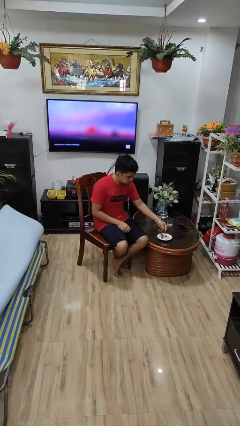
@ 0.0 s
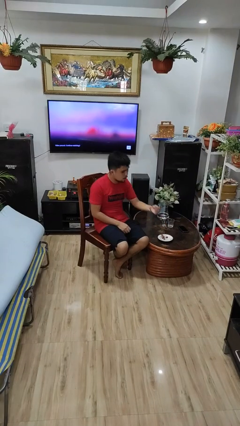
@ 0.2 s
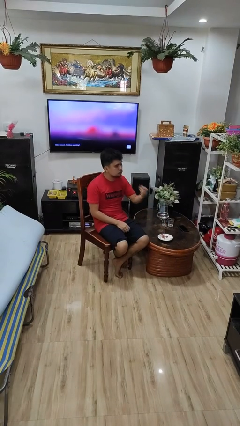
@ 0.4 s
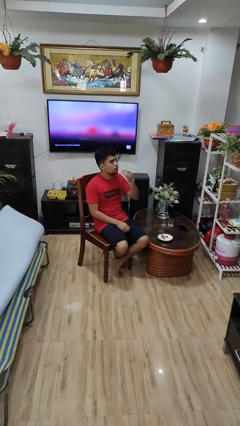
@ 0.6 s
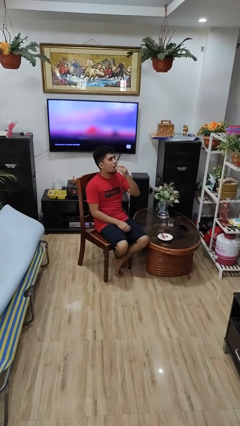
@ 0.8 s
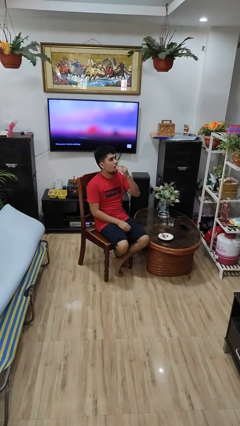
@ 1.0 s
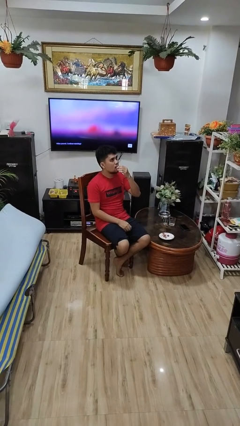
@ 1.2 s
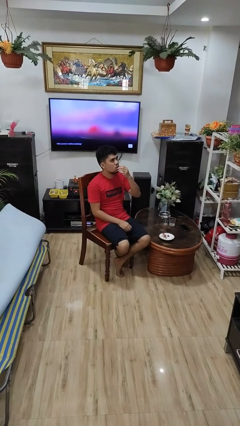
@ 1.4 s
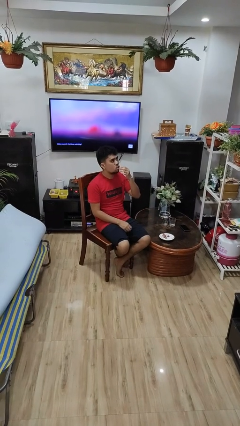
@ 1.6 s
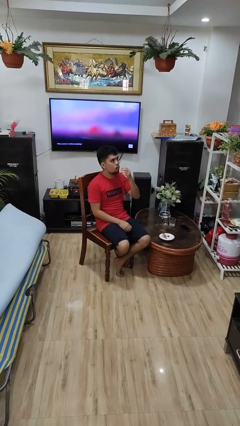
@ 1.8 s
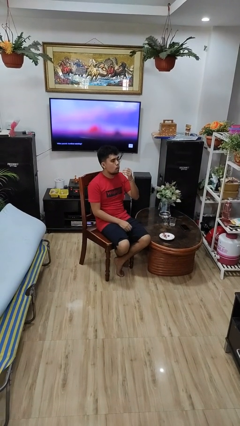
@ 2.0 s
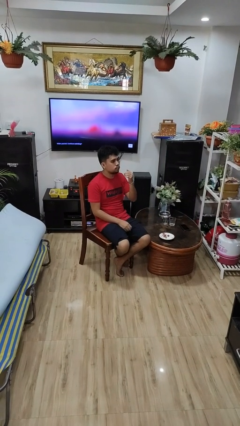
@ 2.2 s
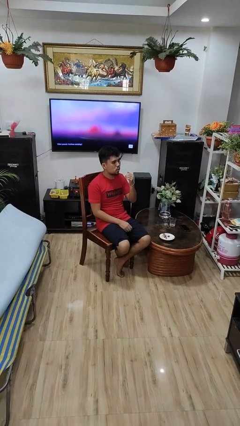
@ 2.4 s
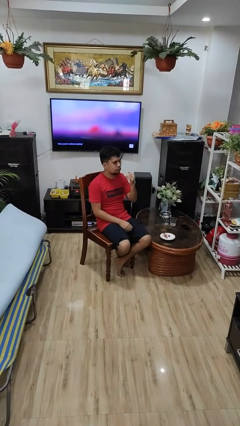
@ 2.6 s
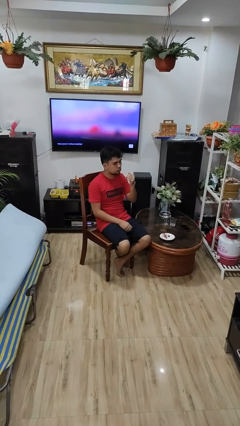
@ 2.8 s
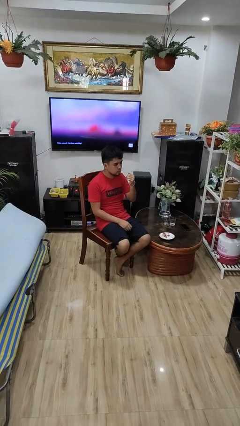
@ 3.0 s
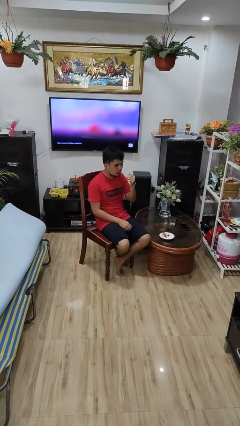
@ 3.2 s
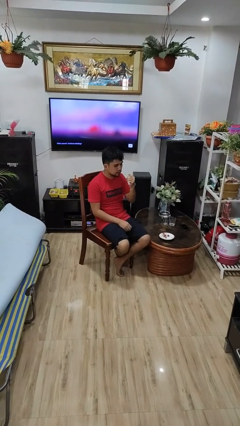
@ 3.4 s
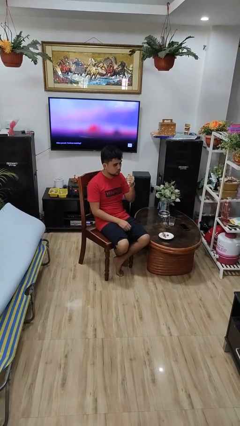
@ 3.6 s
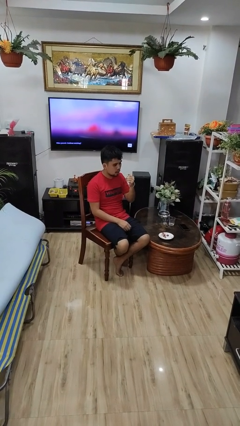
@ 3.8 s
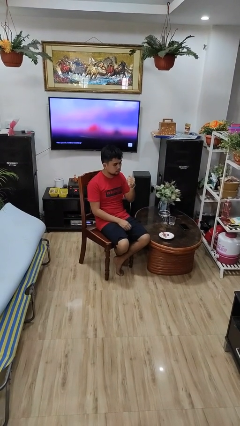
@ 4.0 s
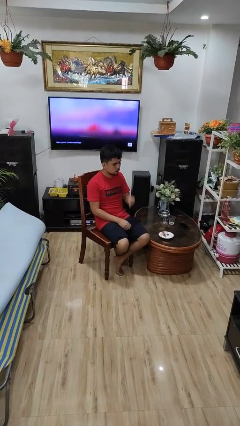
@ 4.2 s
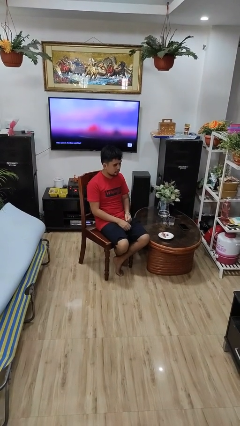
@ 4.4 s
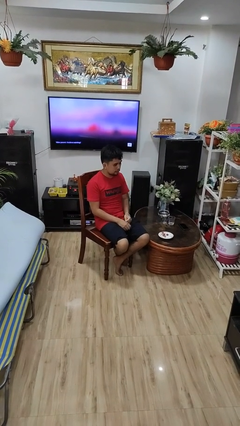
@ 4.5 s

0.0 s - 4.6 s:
person eats with hands

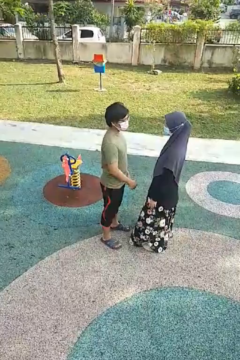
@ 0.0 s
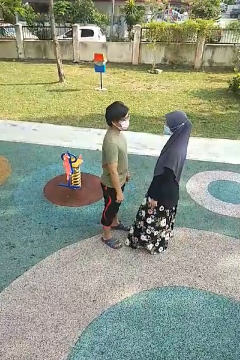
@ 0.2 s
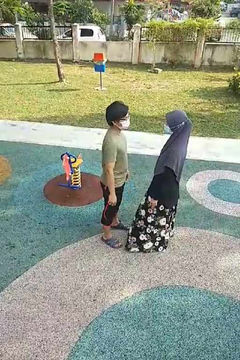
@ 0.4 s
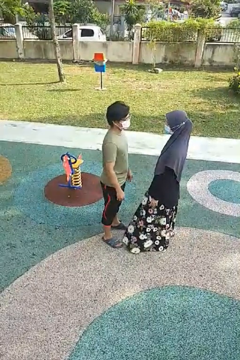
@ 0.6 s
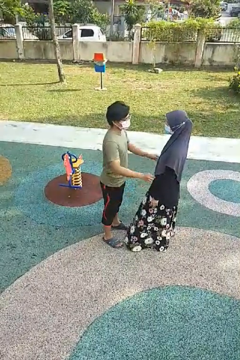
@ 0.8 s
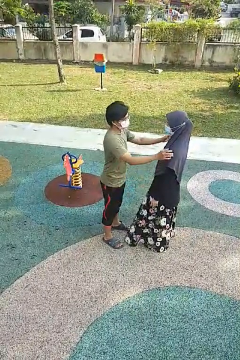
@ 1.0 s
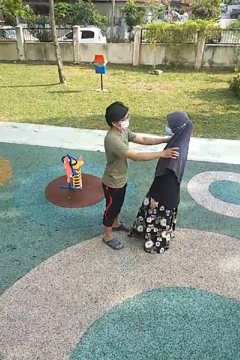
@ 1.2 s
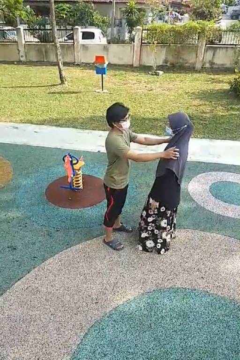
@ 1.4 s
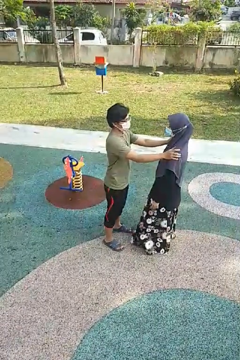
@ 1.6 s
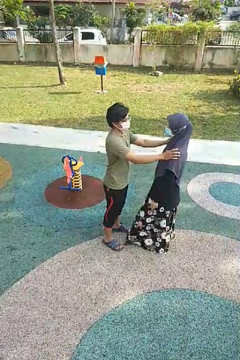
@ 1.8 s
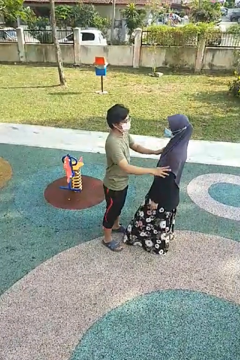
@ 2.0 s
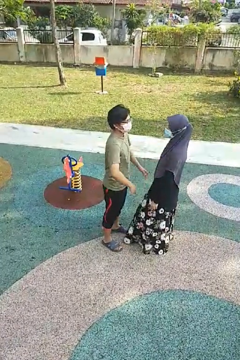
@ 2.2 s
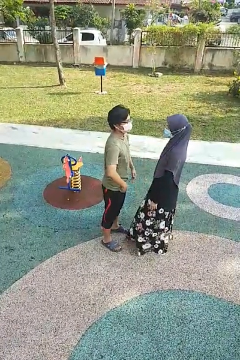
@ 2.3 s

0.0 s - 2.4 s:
person pounds shoulders of person

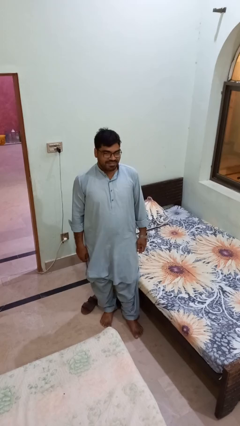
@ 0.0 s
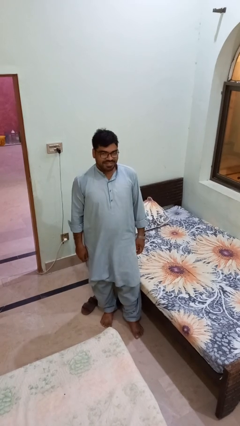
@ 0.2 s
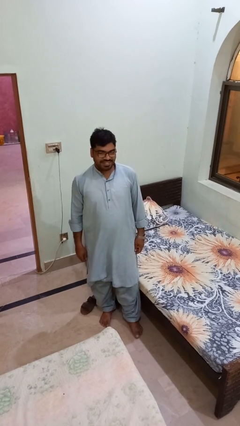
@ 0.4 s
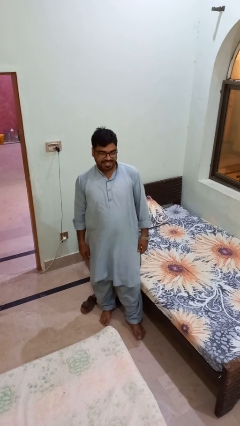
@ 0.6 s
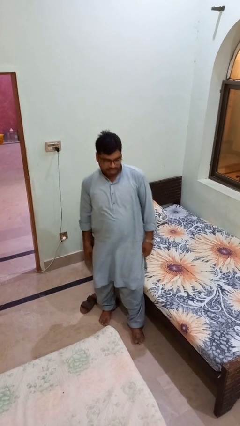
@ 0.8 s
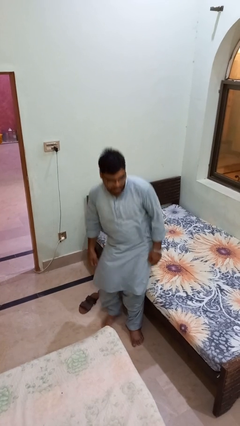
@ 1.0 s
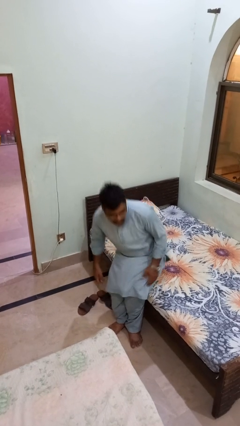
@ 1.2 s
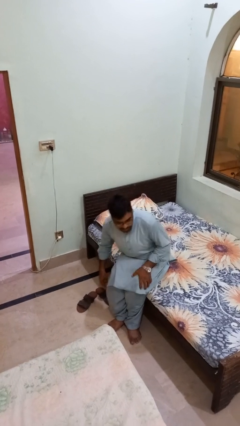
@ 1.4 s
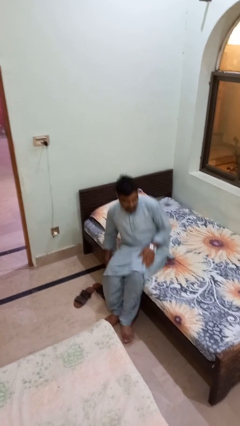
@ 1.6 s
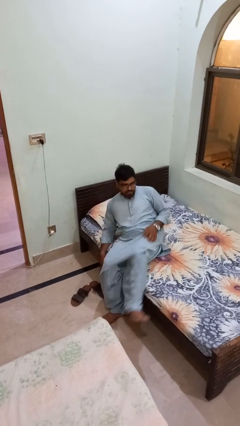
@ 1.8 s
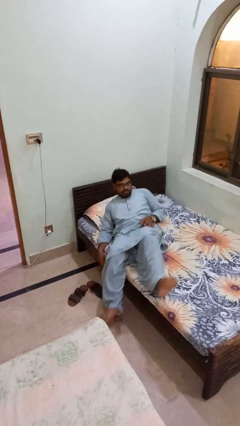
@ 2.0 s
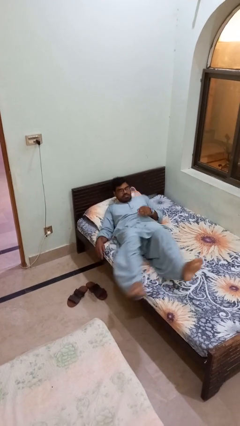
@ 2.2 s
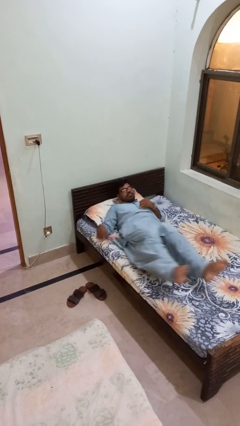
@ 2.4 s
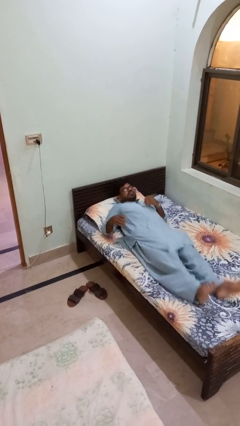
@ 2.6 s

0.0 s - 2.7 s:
person lies down on bed

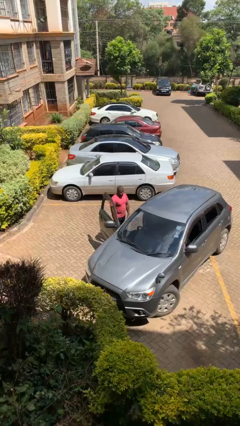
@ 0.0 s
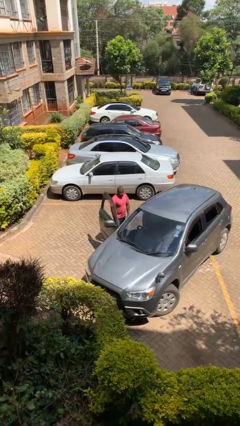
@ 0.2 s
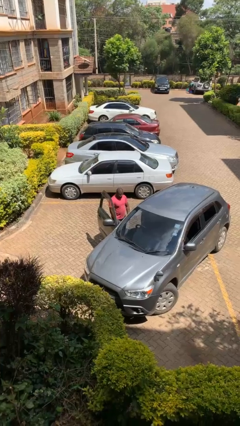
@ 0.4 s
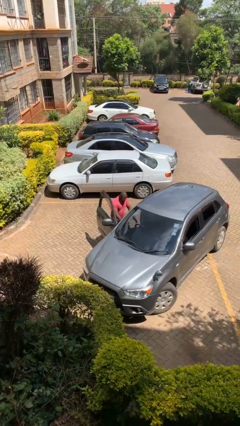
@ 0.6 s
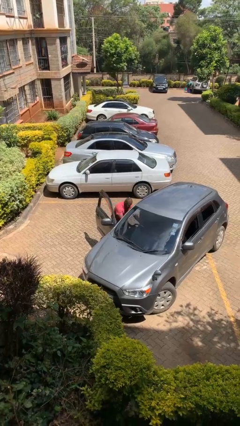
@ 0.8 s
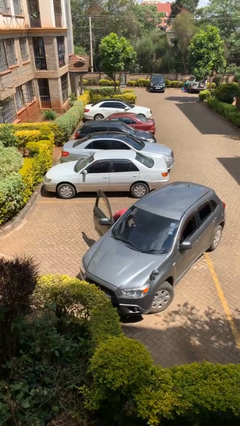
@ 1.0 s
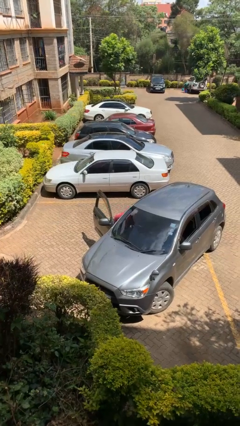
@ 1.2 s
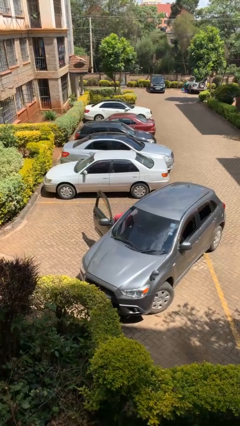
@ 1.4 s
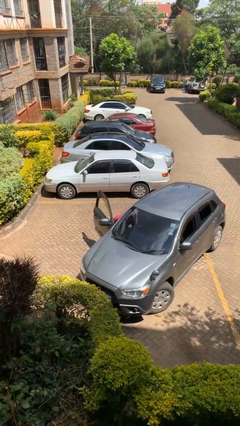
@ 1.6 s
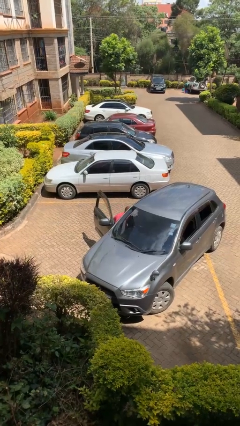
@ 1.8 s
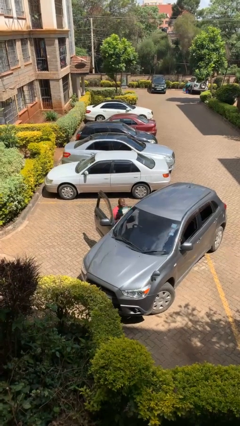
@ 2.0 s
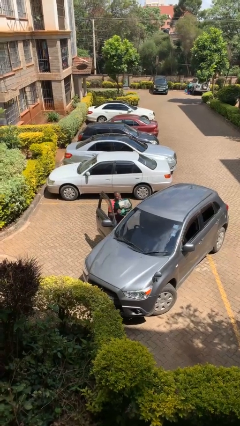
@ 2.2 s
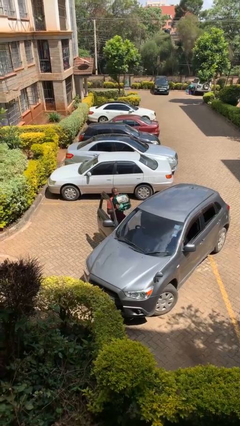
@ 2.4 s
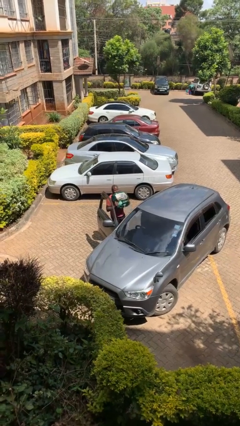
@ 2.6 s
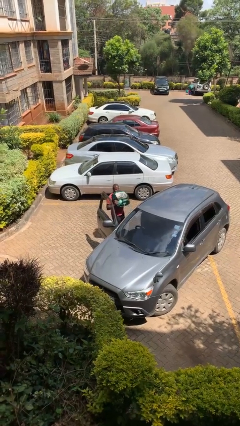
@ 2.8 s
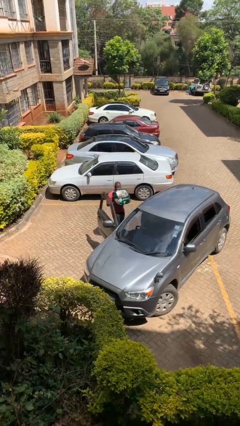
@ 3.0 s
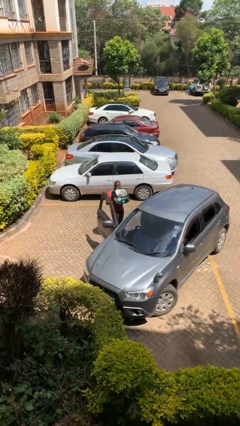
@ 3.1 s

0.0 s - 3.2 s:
person unloads car

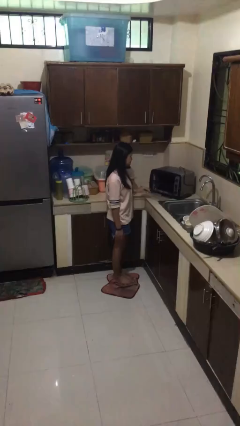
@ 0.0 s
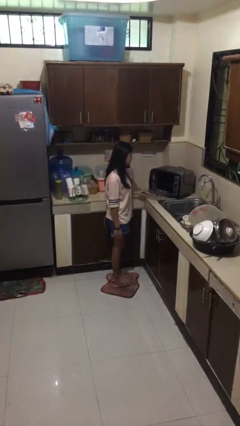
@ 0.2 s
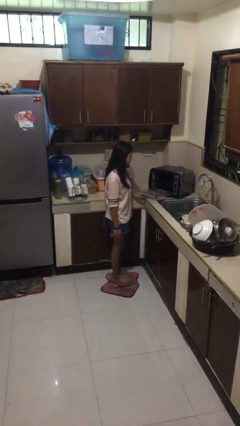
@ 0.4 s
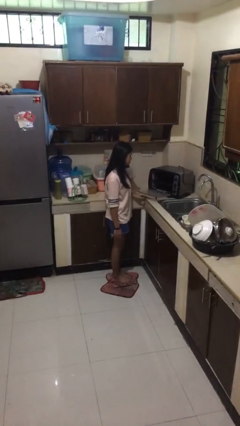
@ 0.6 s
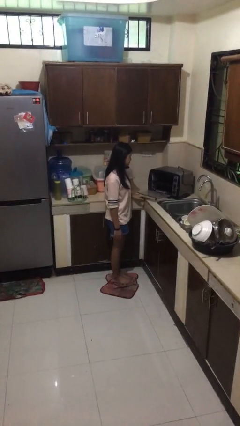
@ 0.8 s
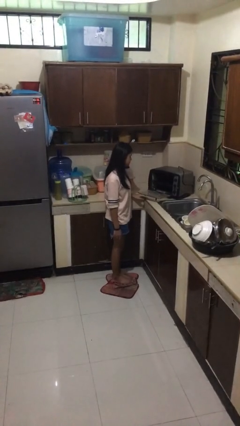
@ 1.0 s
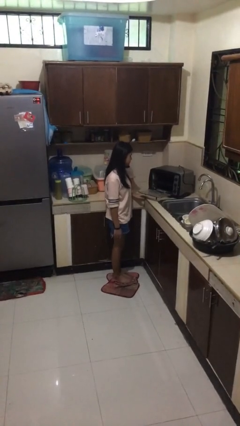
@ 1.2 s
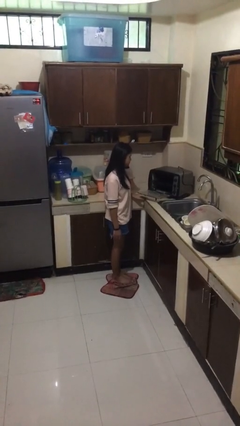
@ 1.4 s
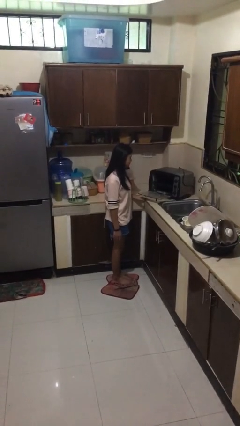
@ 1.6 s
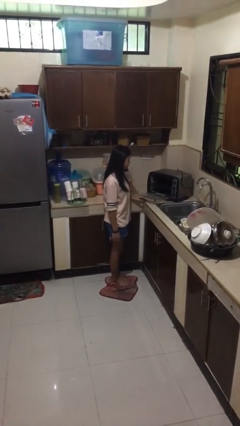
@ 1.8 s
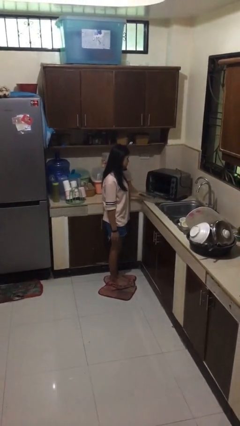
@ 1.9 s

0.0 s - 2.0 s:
person opens microwave

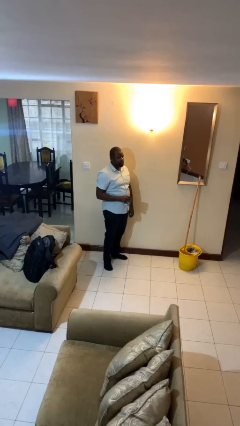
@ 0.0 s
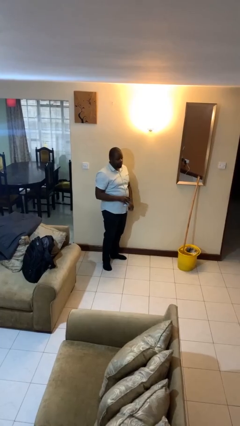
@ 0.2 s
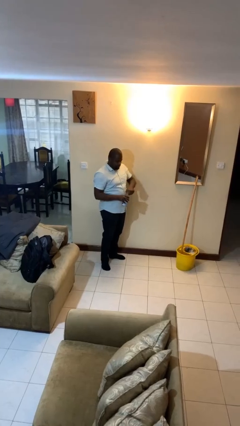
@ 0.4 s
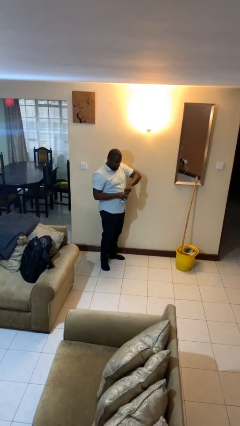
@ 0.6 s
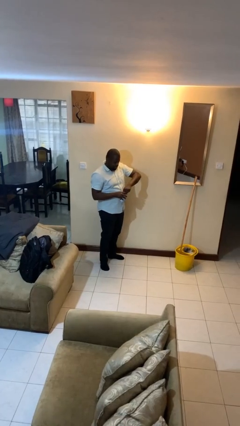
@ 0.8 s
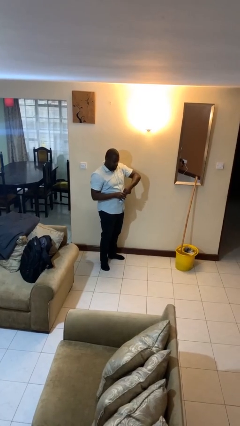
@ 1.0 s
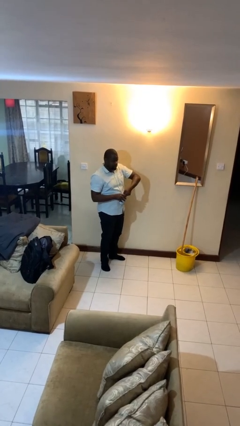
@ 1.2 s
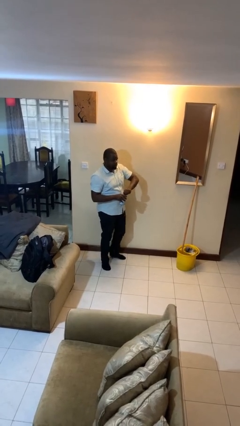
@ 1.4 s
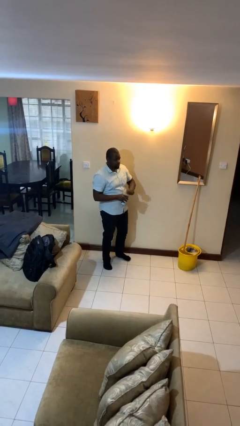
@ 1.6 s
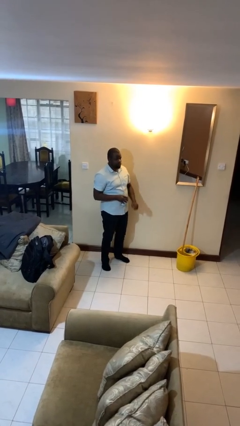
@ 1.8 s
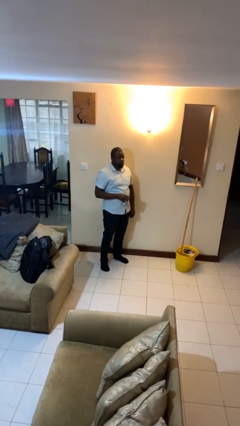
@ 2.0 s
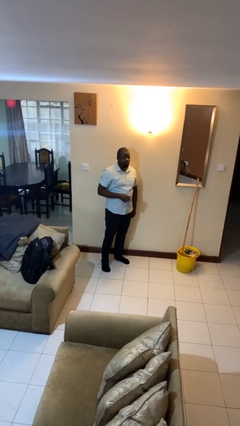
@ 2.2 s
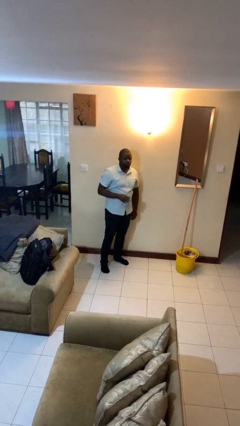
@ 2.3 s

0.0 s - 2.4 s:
person opens beverage can

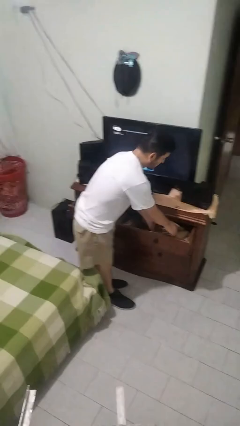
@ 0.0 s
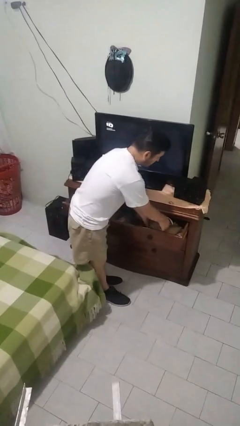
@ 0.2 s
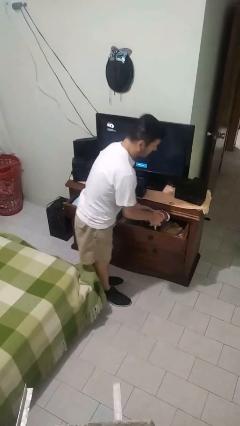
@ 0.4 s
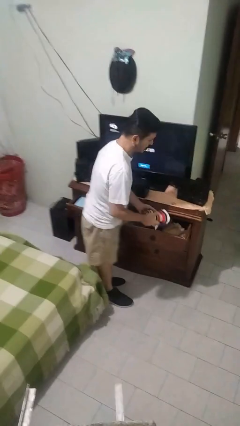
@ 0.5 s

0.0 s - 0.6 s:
person takes clothes from dresser
